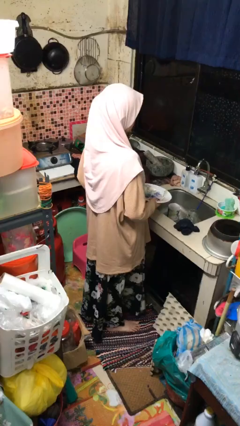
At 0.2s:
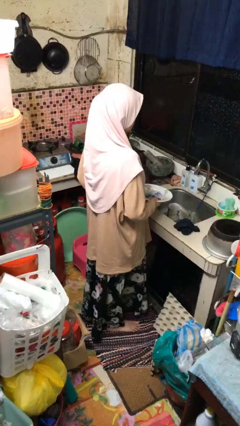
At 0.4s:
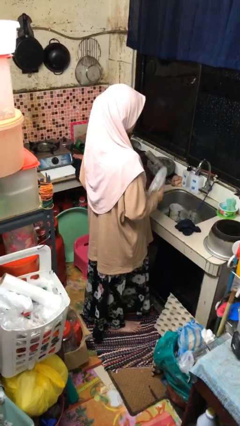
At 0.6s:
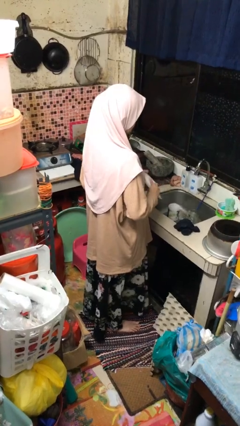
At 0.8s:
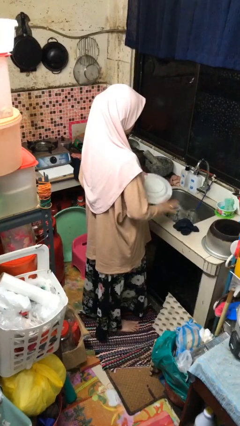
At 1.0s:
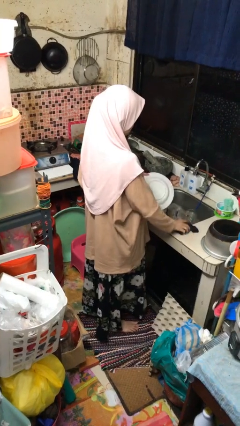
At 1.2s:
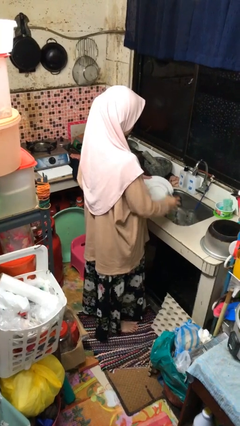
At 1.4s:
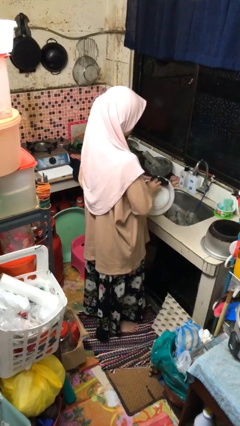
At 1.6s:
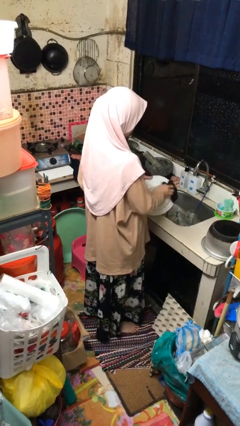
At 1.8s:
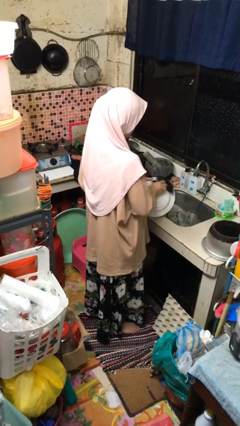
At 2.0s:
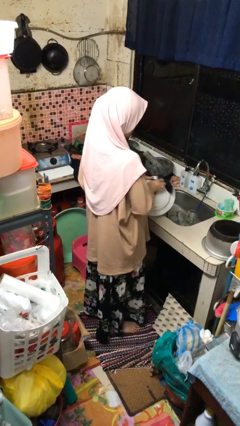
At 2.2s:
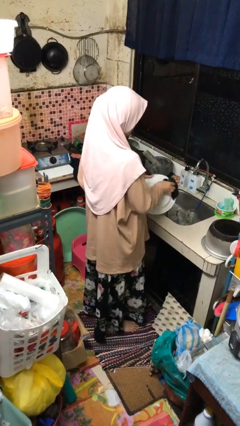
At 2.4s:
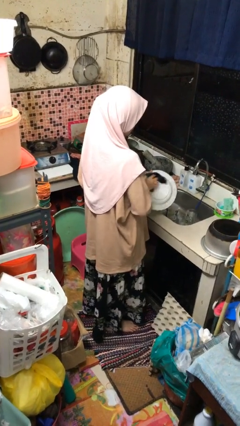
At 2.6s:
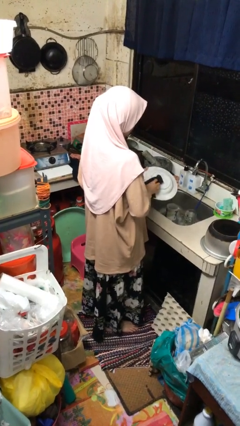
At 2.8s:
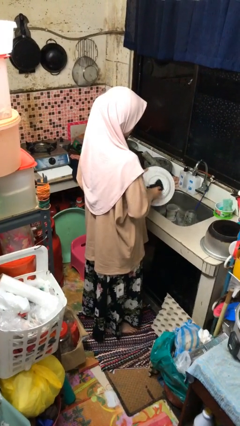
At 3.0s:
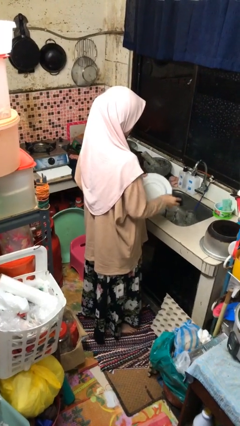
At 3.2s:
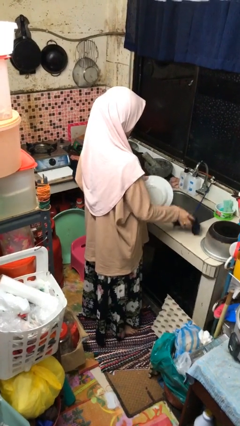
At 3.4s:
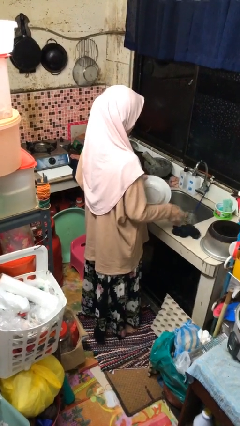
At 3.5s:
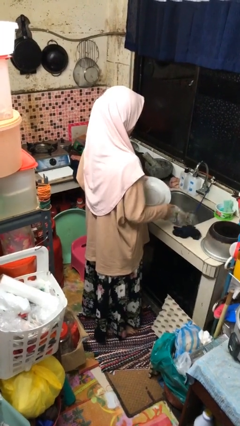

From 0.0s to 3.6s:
person dries dish

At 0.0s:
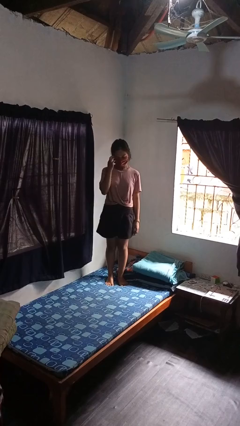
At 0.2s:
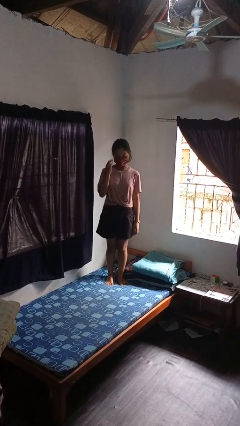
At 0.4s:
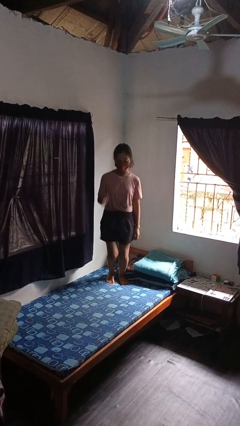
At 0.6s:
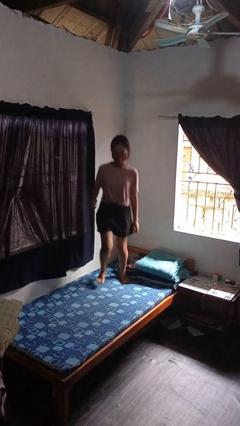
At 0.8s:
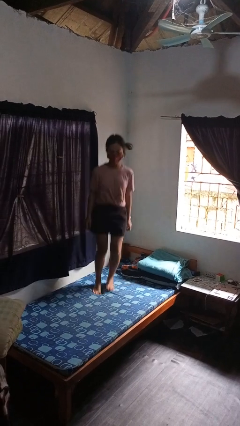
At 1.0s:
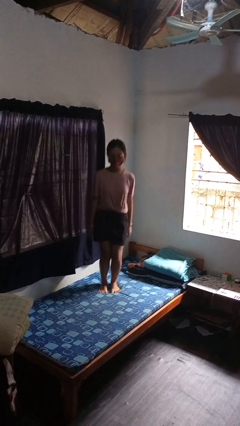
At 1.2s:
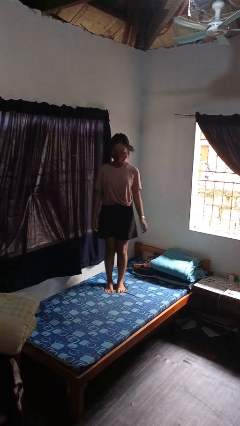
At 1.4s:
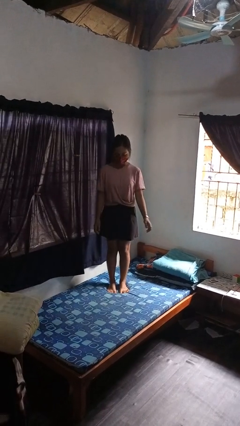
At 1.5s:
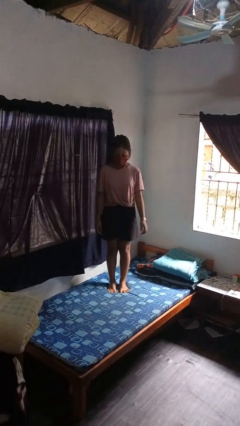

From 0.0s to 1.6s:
person jumps on bed

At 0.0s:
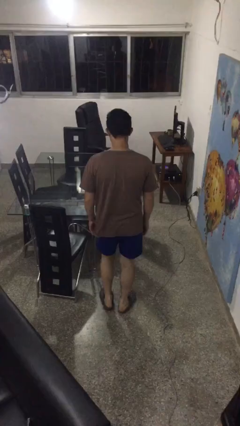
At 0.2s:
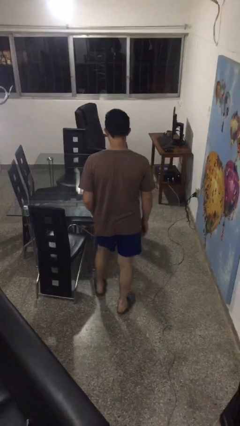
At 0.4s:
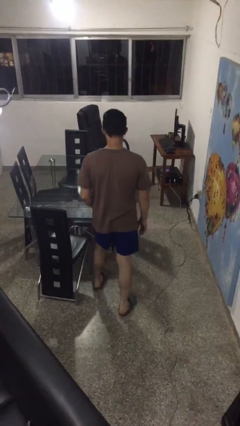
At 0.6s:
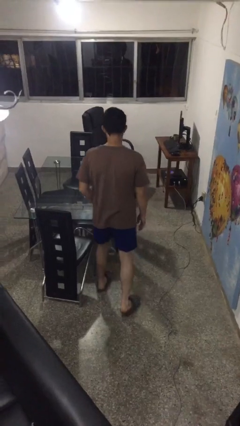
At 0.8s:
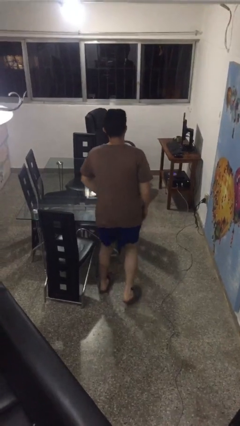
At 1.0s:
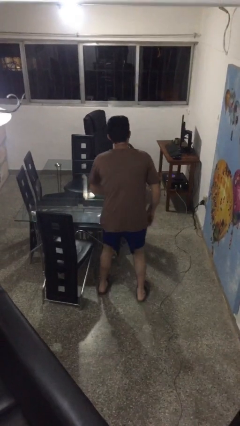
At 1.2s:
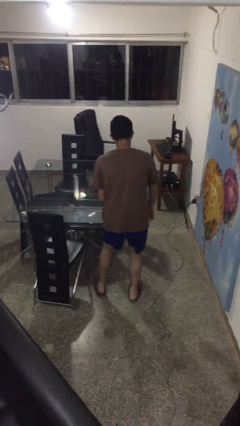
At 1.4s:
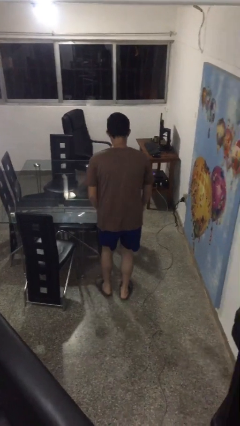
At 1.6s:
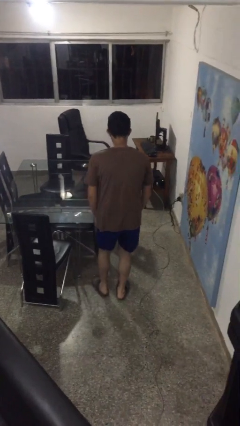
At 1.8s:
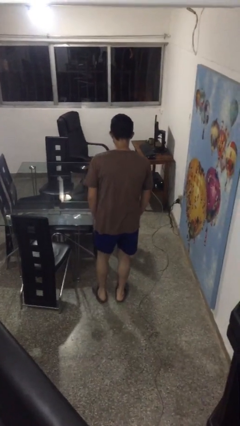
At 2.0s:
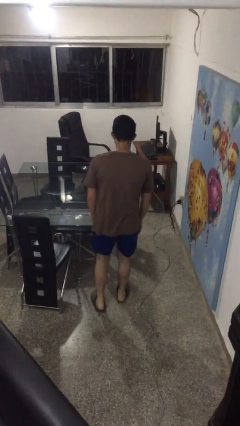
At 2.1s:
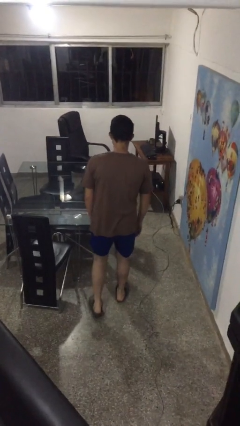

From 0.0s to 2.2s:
person bumps into table

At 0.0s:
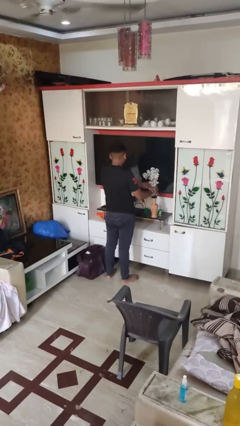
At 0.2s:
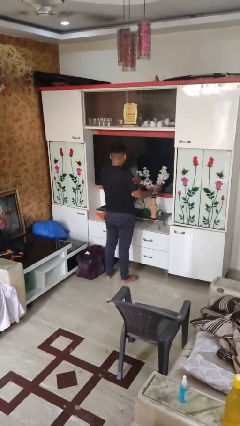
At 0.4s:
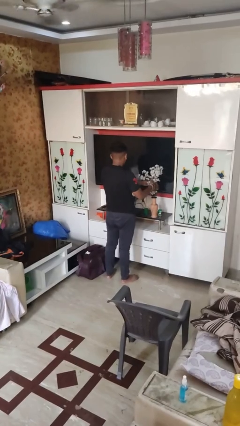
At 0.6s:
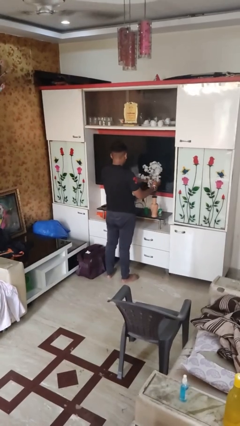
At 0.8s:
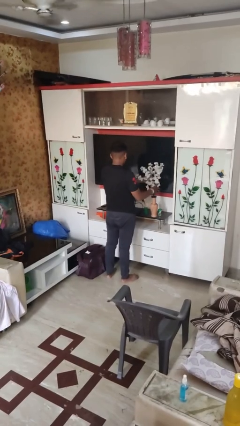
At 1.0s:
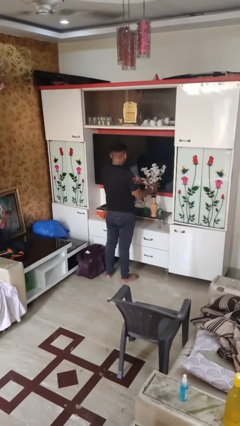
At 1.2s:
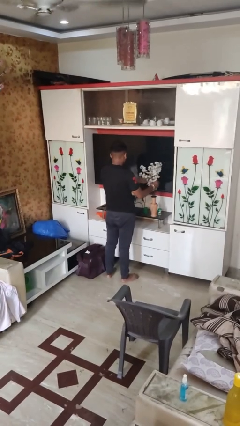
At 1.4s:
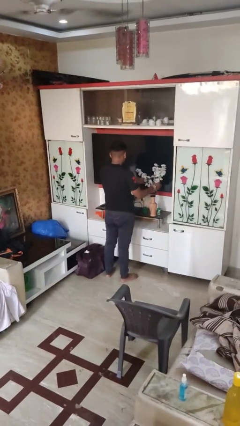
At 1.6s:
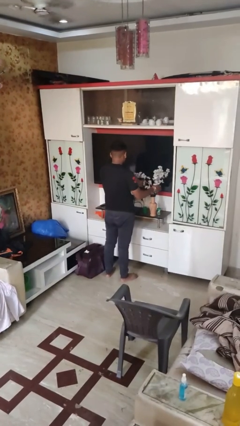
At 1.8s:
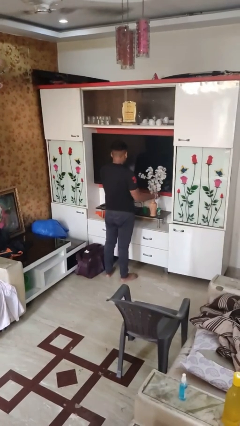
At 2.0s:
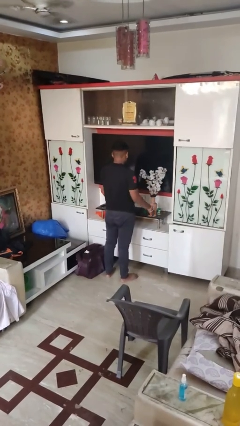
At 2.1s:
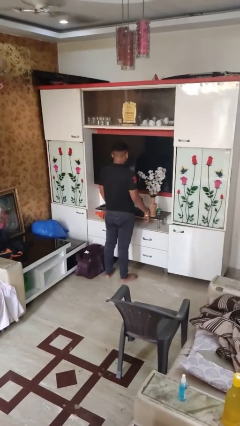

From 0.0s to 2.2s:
person arranges flowers in vase

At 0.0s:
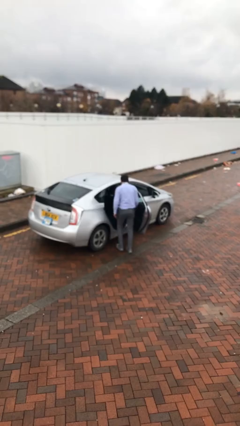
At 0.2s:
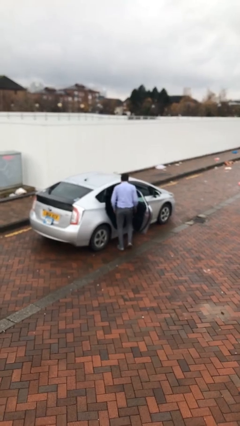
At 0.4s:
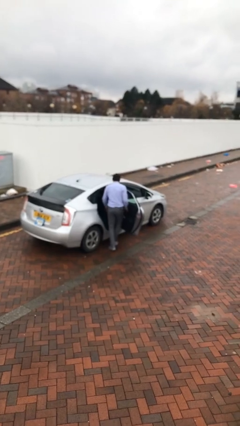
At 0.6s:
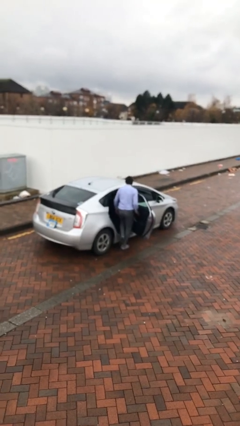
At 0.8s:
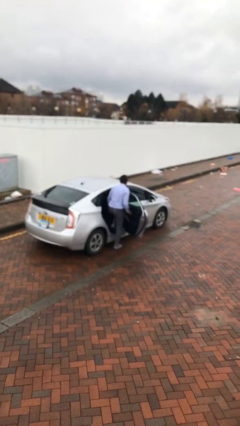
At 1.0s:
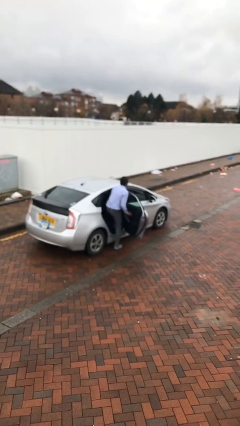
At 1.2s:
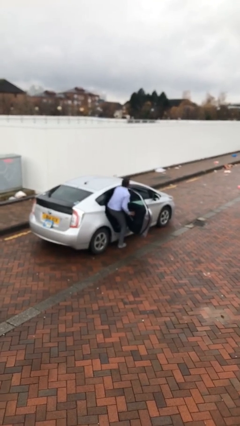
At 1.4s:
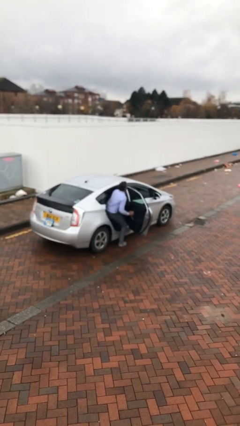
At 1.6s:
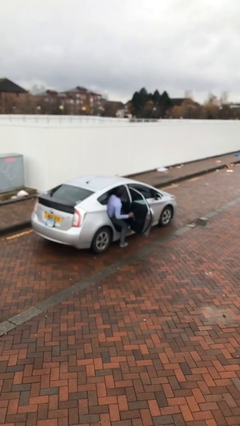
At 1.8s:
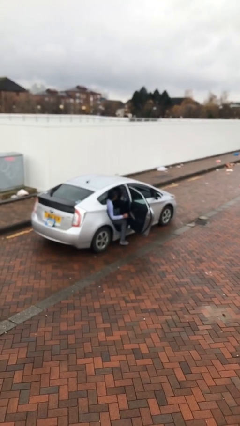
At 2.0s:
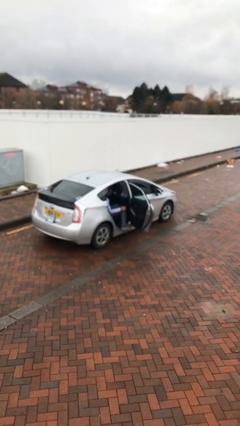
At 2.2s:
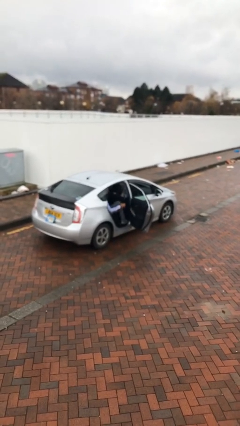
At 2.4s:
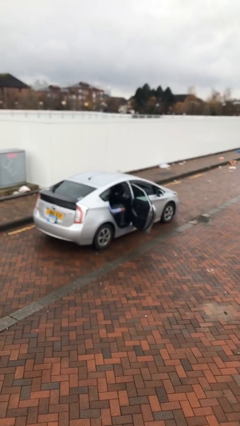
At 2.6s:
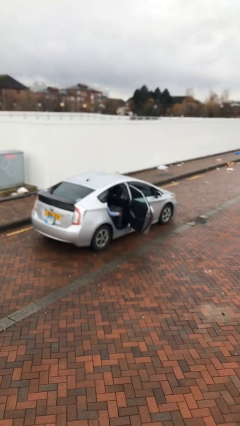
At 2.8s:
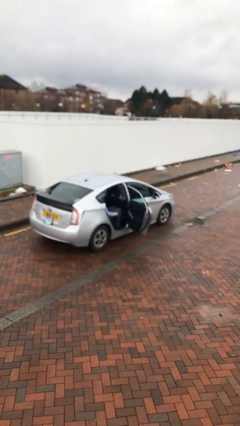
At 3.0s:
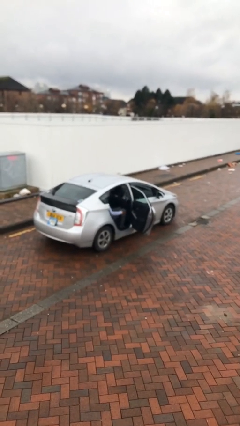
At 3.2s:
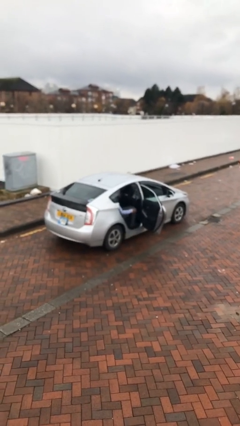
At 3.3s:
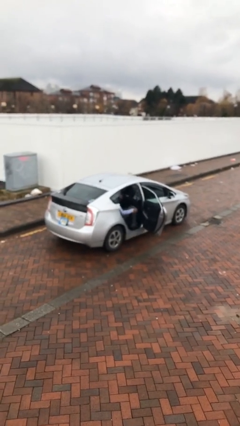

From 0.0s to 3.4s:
person enters car

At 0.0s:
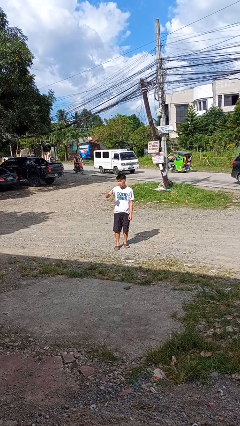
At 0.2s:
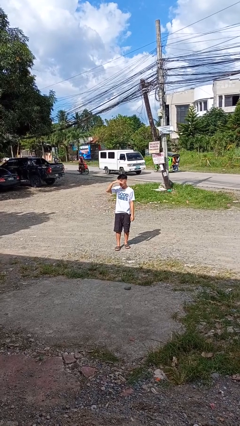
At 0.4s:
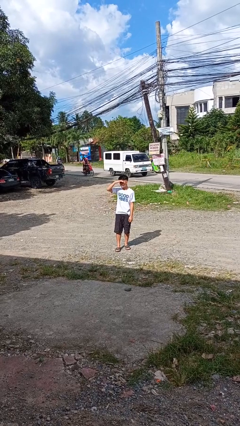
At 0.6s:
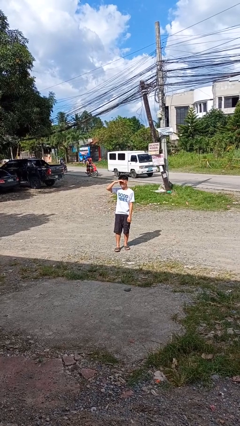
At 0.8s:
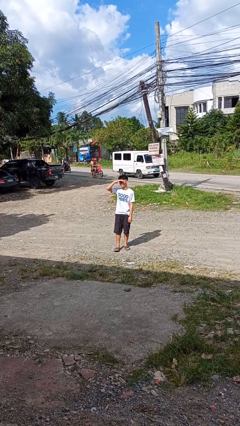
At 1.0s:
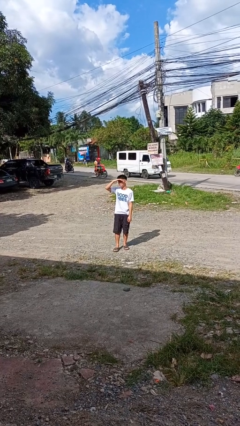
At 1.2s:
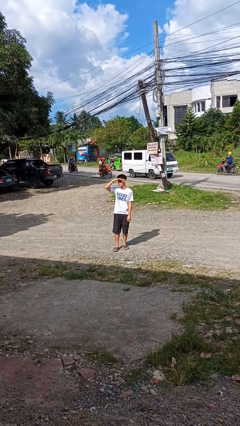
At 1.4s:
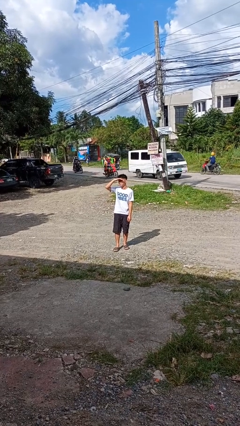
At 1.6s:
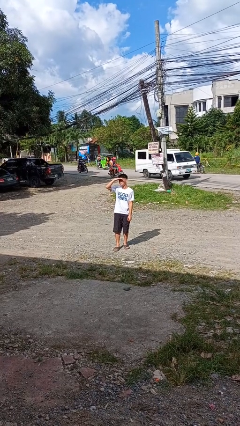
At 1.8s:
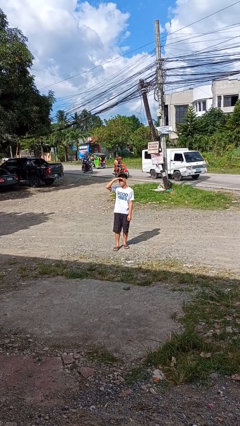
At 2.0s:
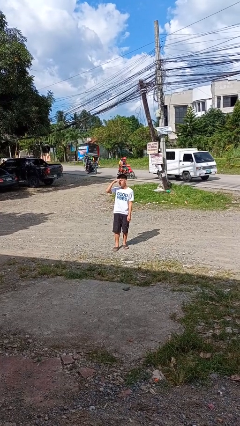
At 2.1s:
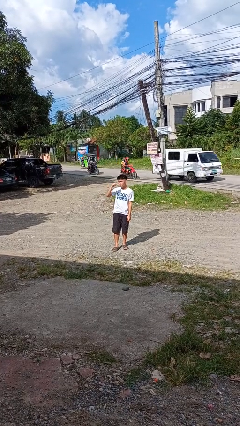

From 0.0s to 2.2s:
person shades eyes

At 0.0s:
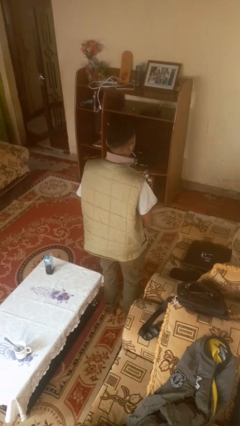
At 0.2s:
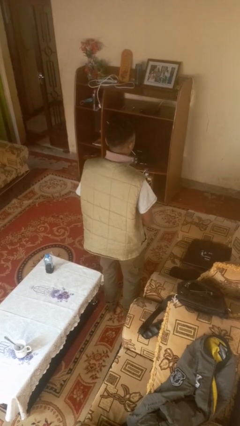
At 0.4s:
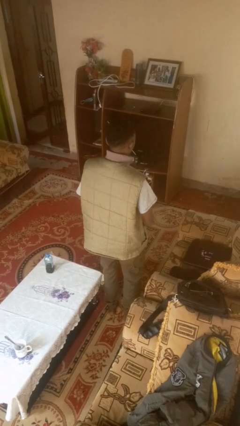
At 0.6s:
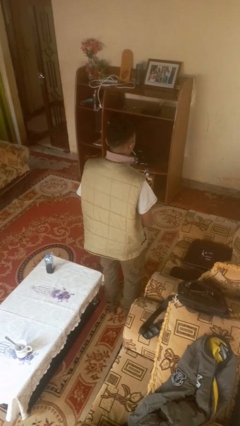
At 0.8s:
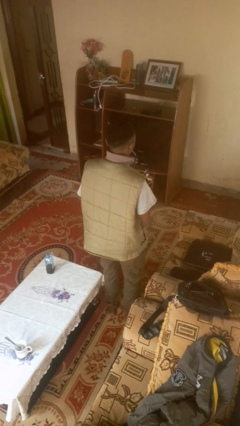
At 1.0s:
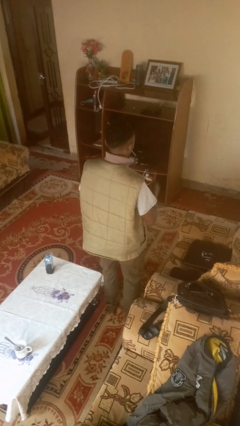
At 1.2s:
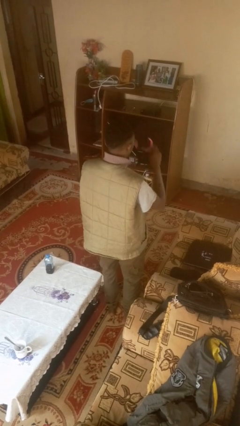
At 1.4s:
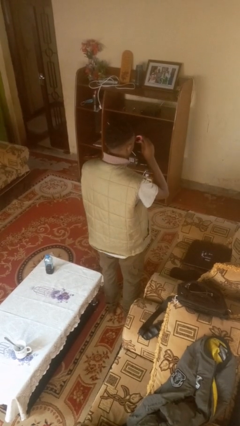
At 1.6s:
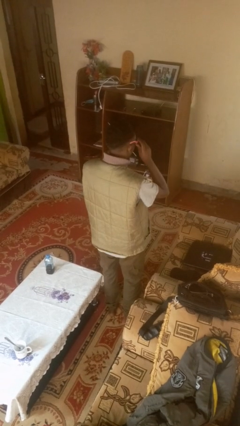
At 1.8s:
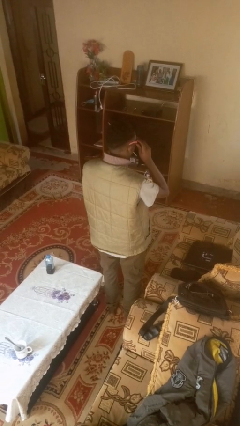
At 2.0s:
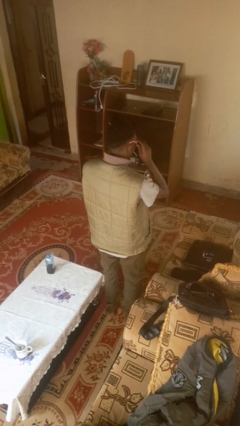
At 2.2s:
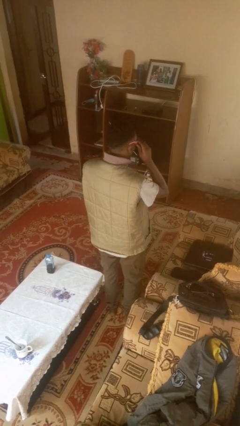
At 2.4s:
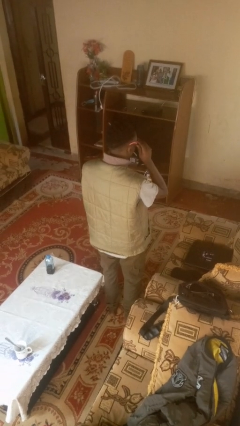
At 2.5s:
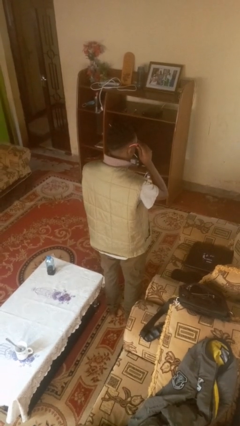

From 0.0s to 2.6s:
person puts on sunglasses
